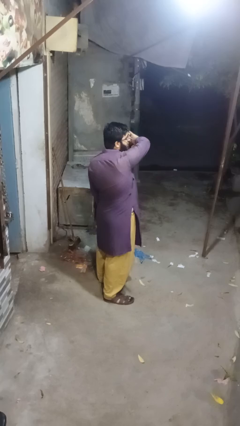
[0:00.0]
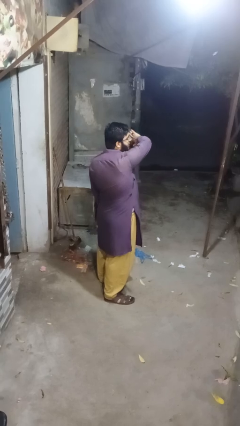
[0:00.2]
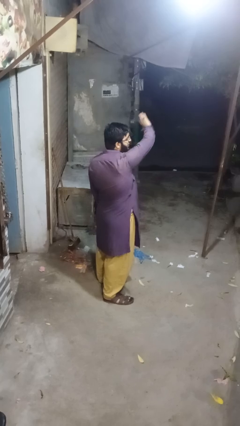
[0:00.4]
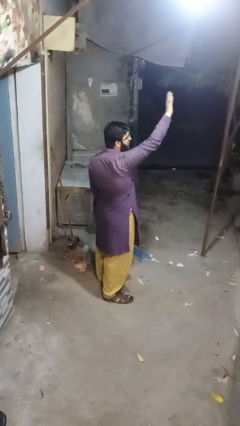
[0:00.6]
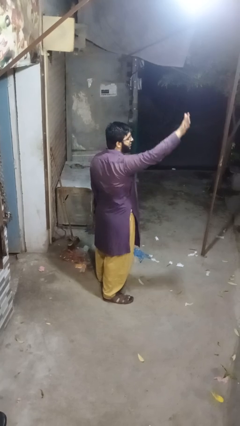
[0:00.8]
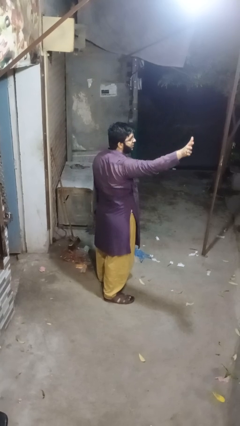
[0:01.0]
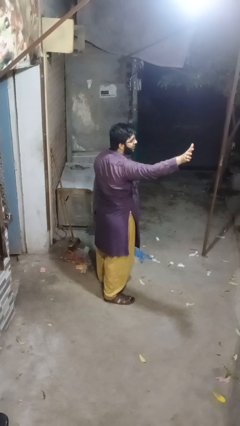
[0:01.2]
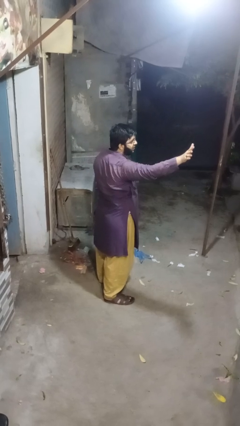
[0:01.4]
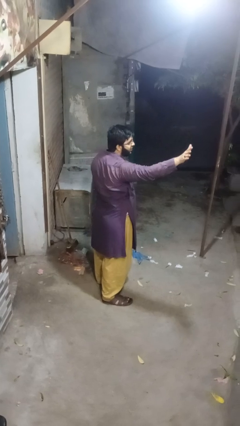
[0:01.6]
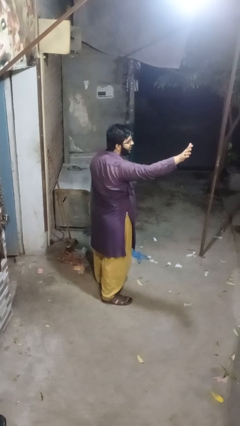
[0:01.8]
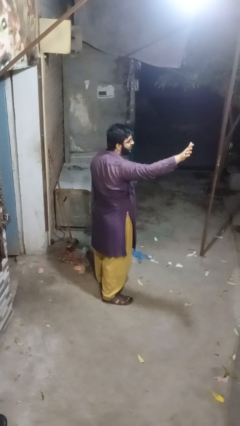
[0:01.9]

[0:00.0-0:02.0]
person gestures swipe right

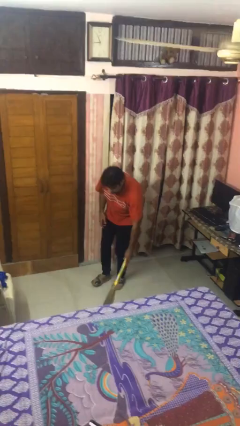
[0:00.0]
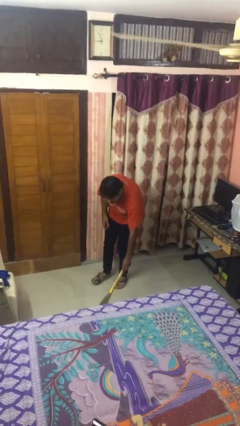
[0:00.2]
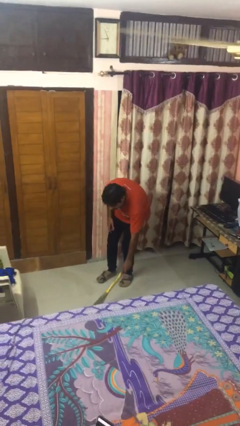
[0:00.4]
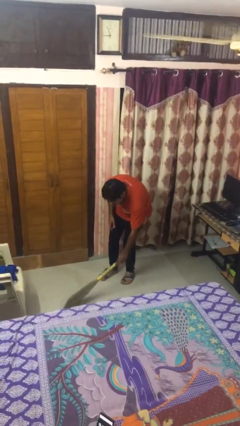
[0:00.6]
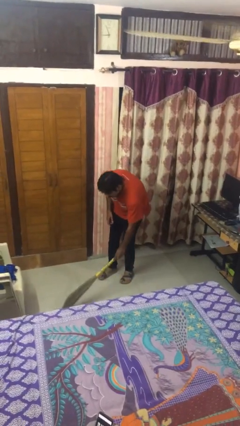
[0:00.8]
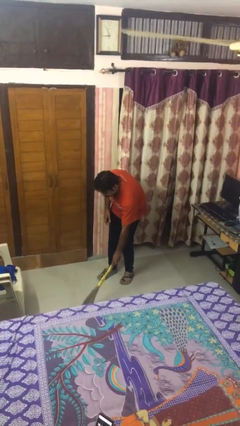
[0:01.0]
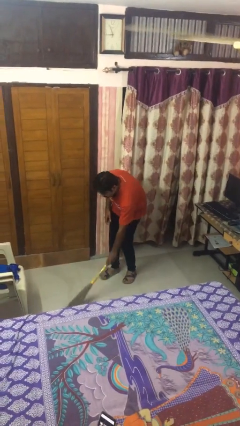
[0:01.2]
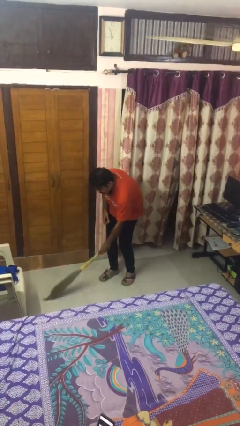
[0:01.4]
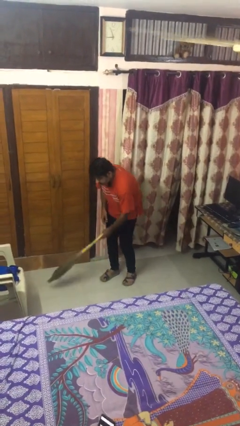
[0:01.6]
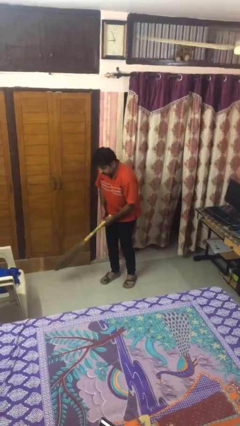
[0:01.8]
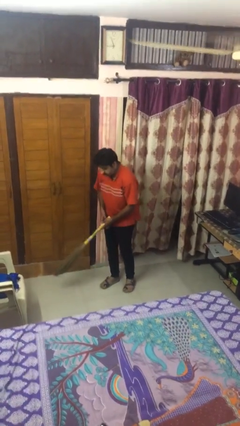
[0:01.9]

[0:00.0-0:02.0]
person sweeps floor

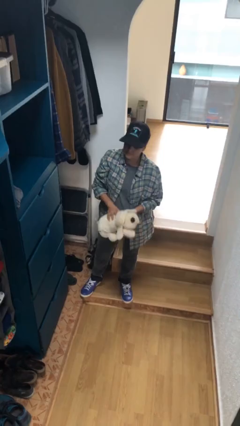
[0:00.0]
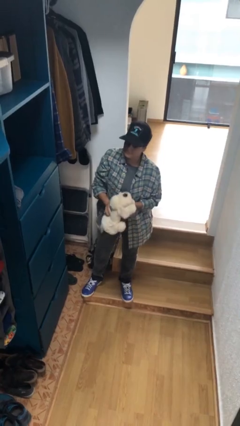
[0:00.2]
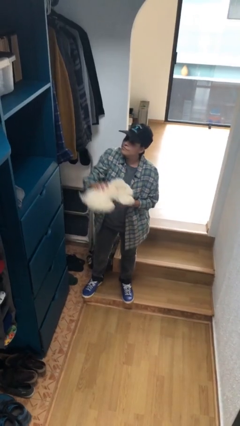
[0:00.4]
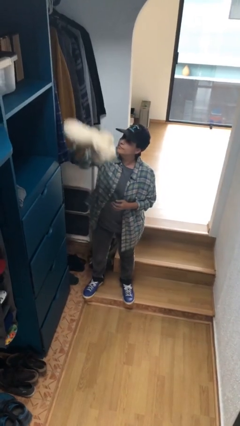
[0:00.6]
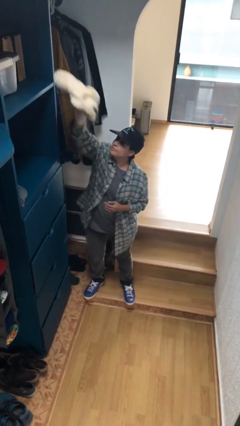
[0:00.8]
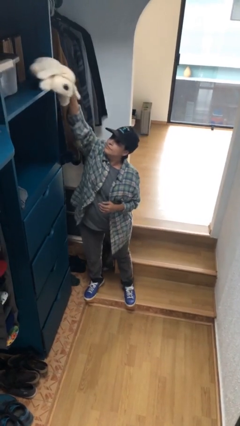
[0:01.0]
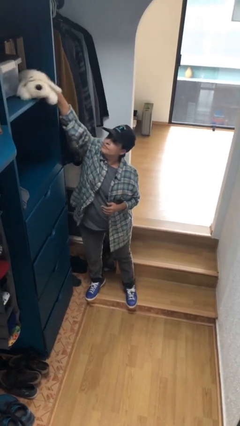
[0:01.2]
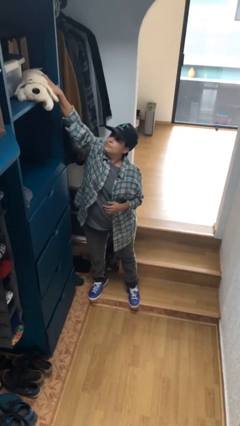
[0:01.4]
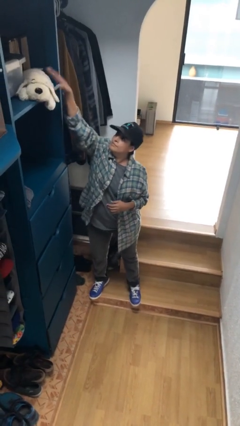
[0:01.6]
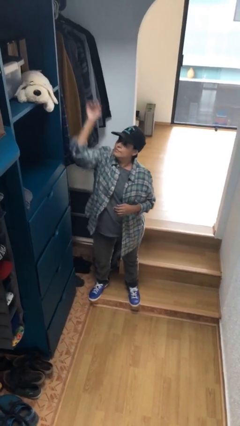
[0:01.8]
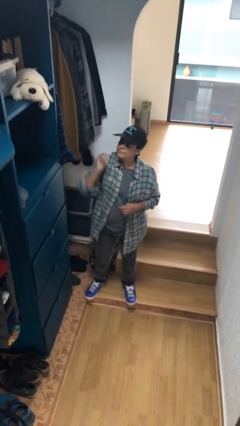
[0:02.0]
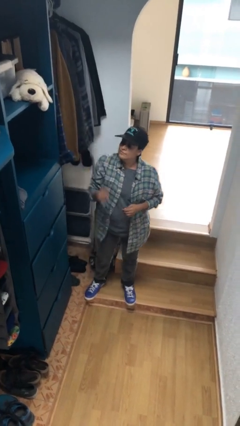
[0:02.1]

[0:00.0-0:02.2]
person puts down object on shelf

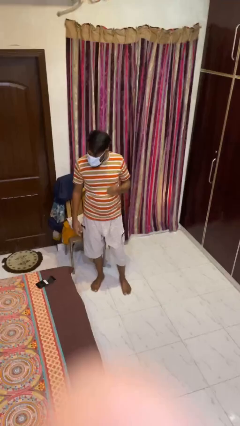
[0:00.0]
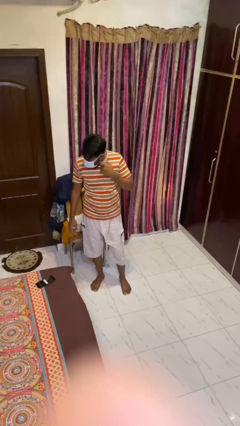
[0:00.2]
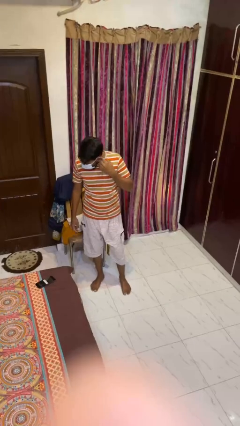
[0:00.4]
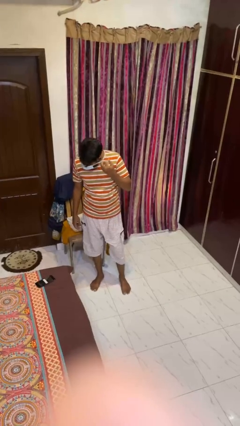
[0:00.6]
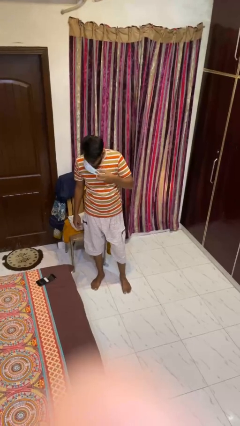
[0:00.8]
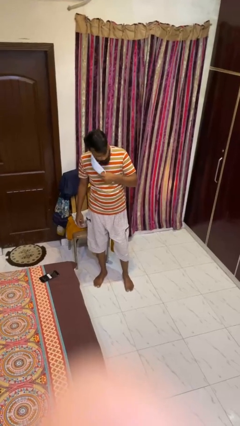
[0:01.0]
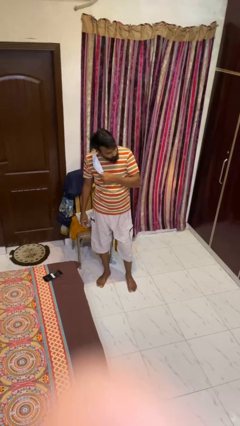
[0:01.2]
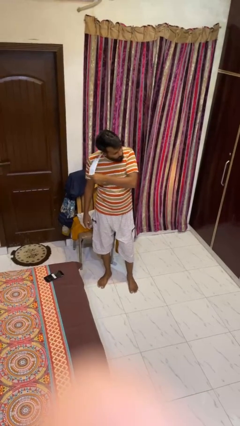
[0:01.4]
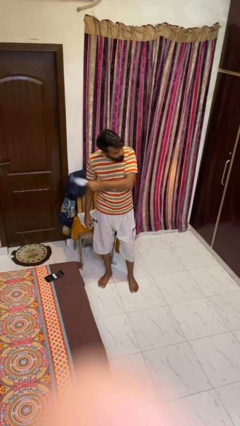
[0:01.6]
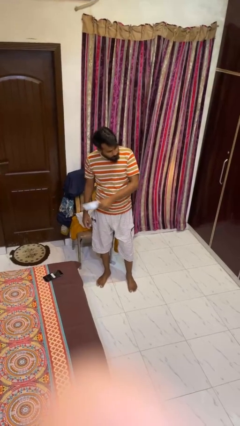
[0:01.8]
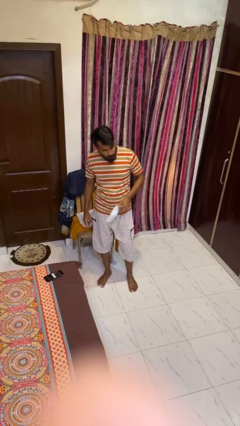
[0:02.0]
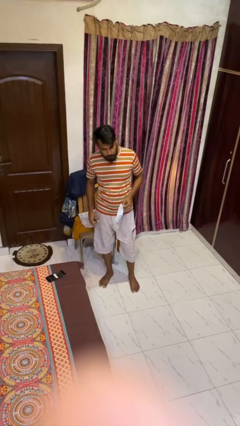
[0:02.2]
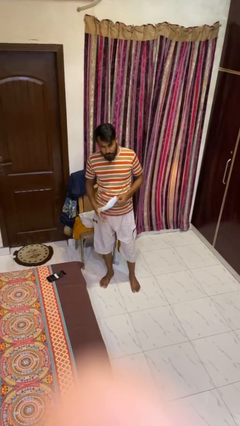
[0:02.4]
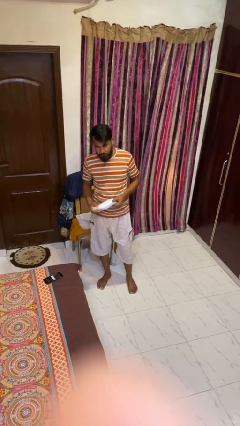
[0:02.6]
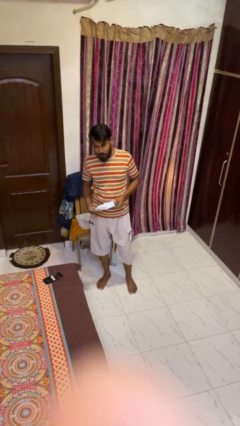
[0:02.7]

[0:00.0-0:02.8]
person takes off facemask

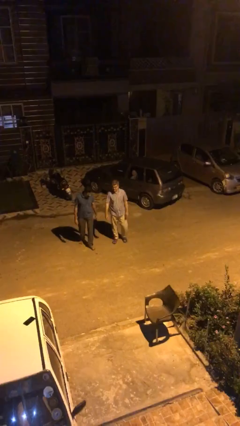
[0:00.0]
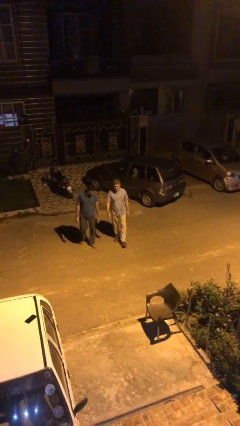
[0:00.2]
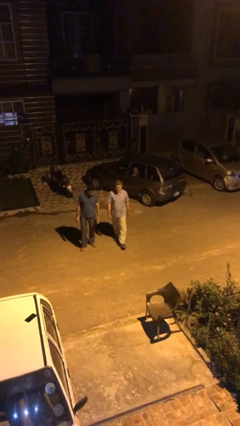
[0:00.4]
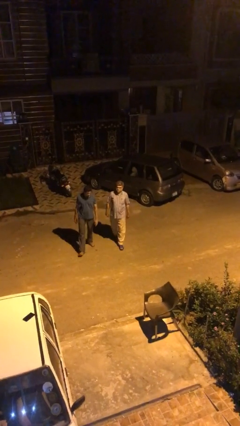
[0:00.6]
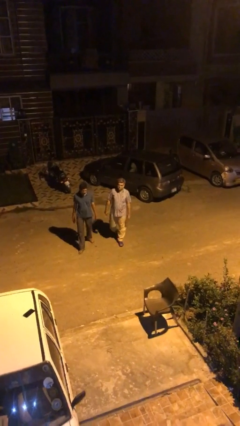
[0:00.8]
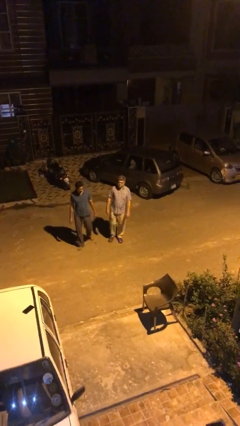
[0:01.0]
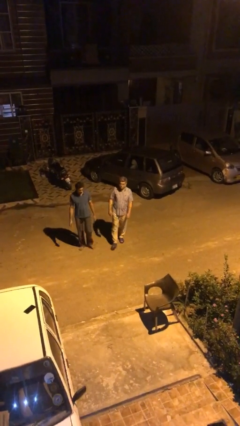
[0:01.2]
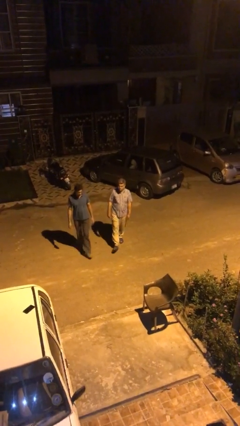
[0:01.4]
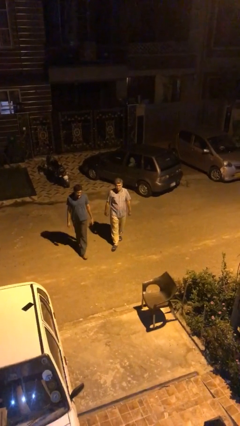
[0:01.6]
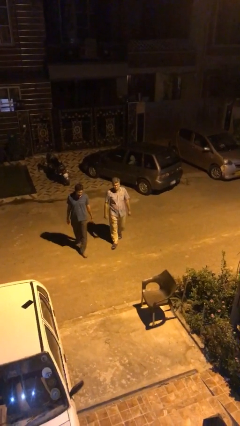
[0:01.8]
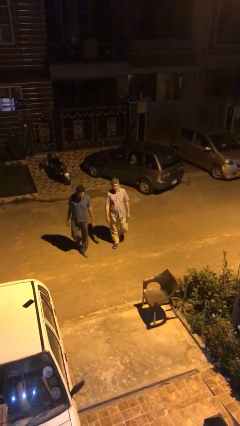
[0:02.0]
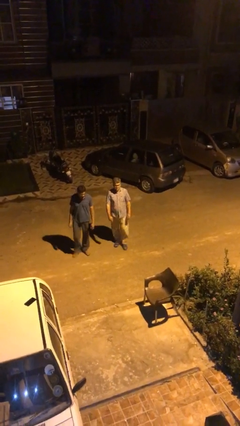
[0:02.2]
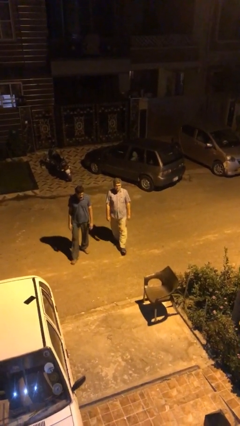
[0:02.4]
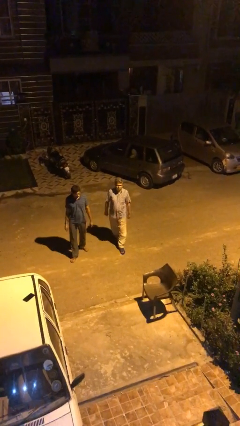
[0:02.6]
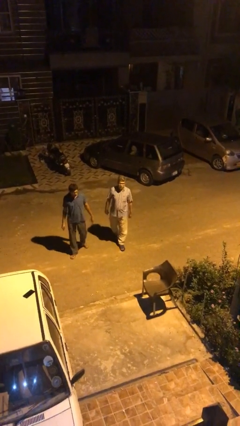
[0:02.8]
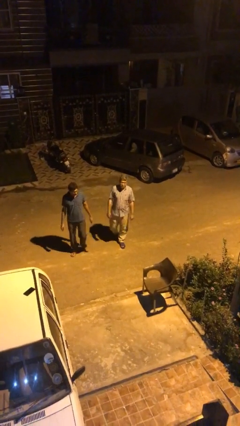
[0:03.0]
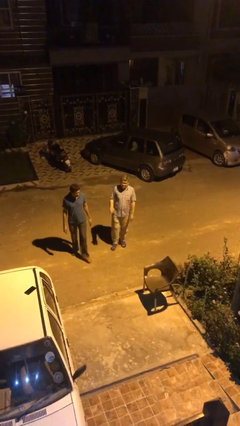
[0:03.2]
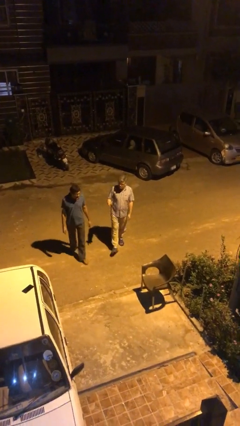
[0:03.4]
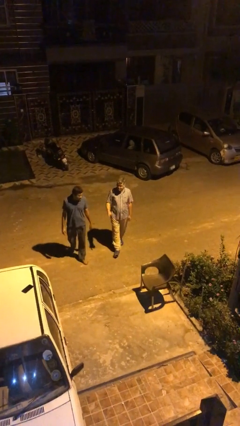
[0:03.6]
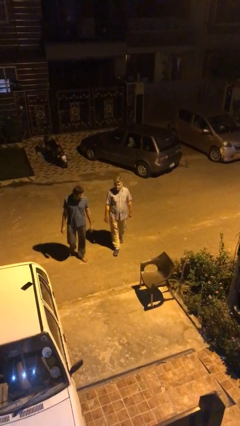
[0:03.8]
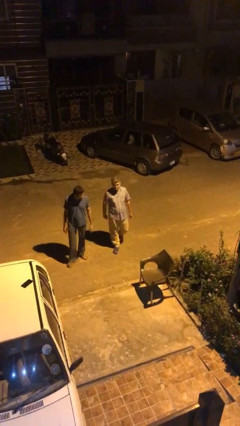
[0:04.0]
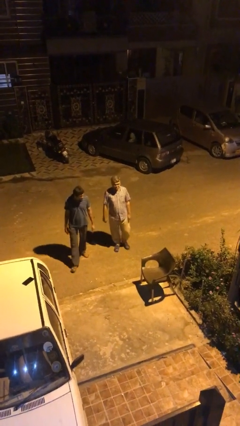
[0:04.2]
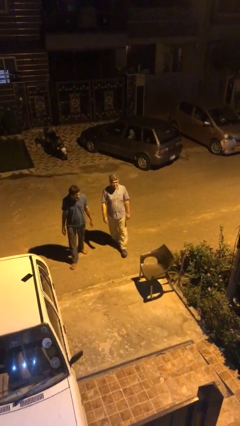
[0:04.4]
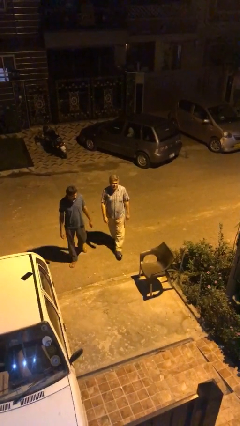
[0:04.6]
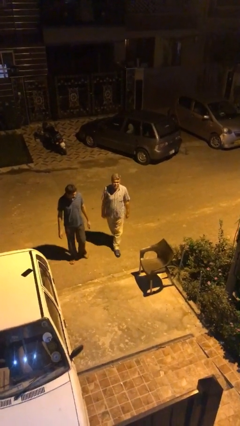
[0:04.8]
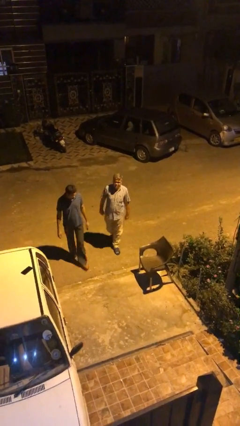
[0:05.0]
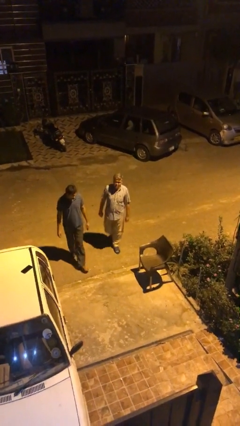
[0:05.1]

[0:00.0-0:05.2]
person talks to person

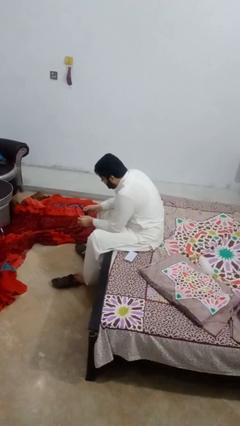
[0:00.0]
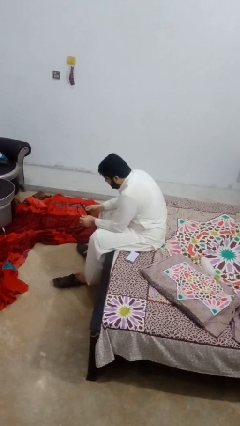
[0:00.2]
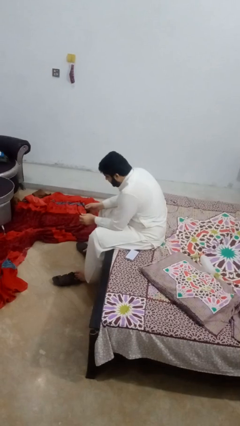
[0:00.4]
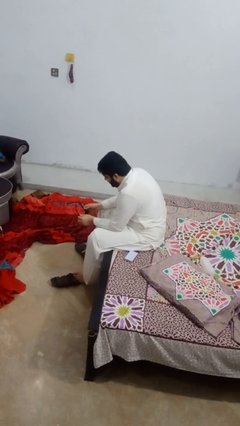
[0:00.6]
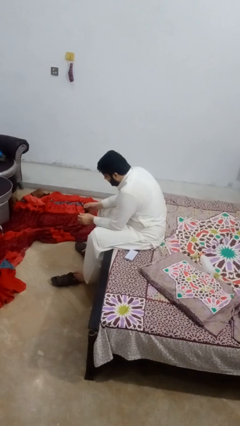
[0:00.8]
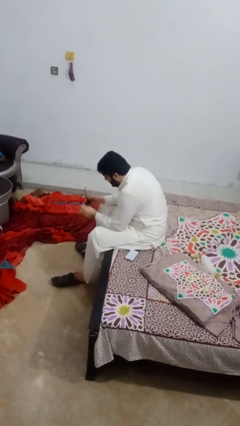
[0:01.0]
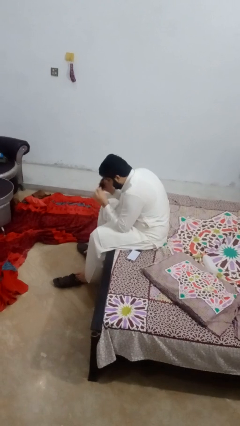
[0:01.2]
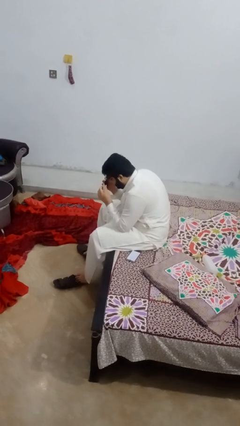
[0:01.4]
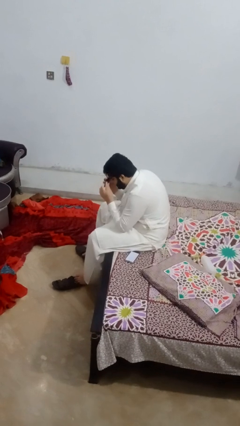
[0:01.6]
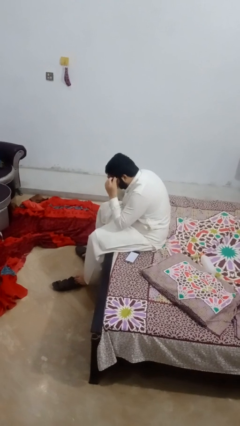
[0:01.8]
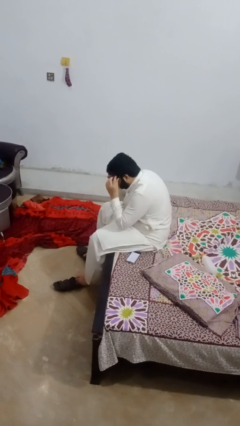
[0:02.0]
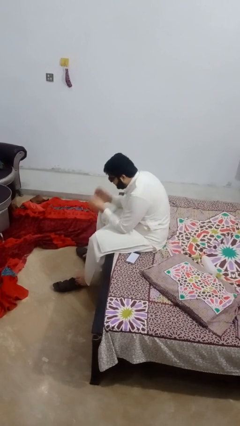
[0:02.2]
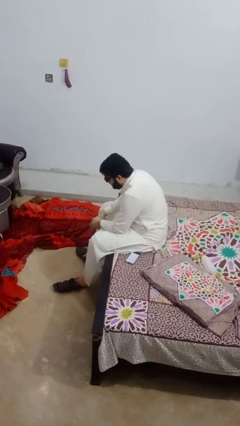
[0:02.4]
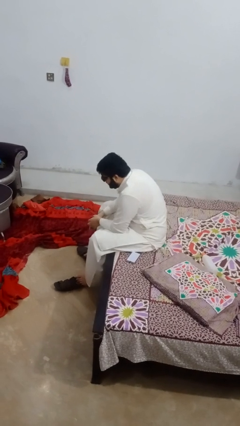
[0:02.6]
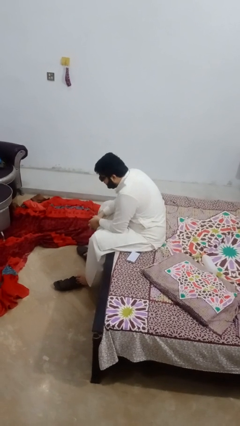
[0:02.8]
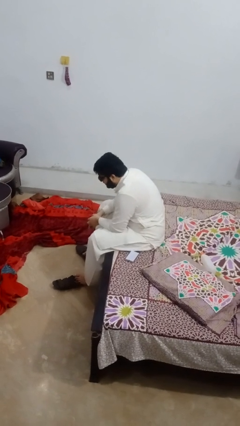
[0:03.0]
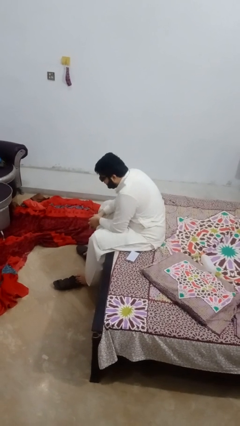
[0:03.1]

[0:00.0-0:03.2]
person puts on glasses
